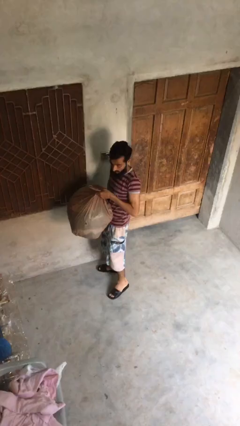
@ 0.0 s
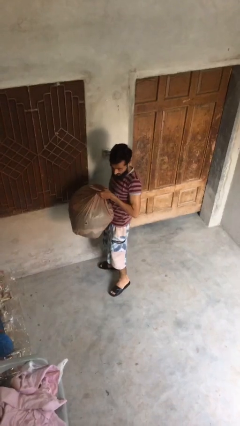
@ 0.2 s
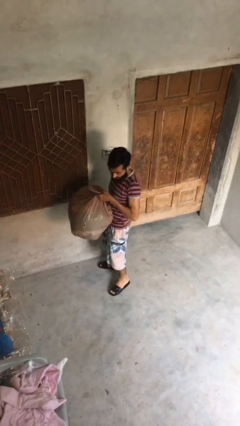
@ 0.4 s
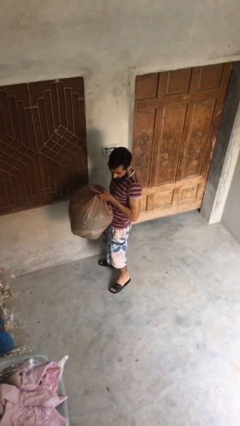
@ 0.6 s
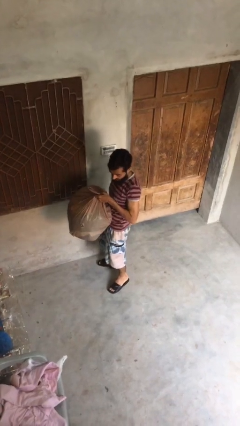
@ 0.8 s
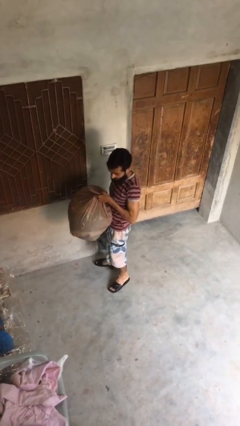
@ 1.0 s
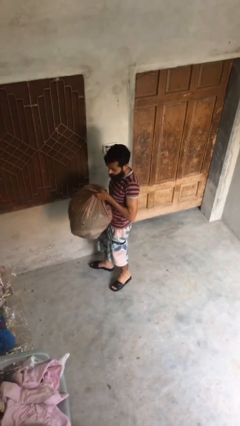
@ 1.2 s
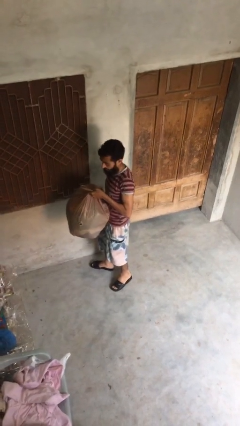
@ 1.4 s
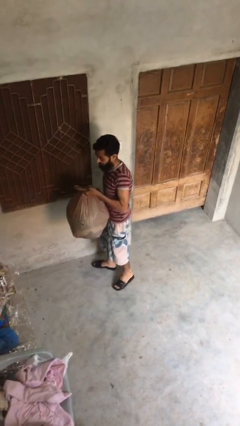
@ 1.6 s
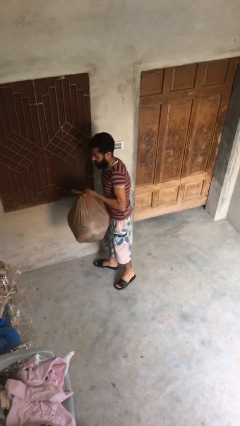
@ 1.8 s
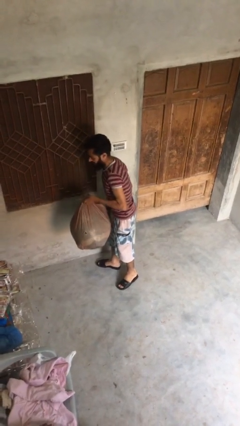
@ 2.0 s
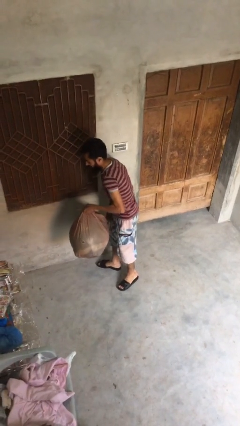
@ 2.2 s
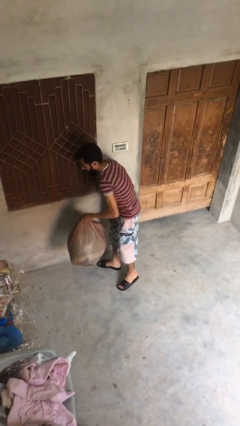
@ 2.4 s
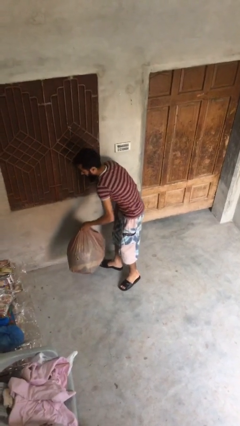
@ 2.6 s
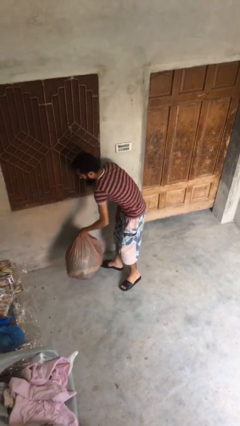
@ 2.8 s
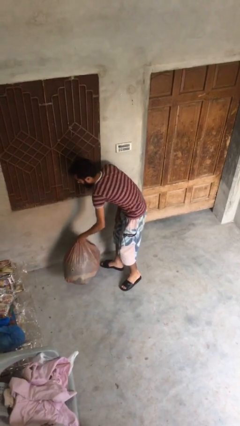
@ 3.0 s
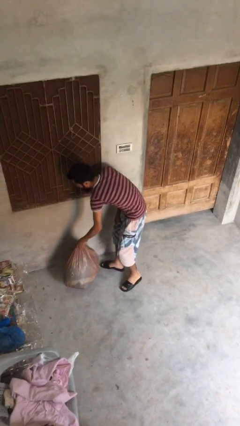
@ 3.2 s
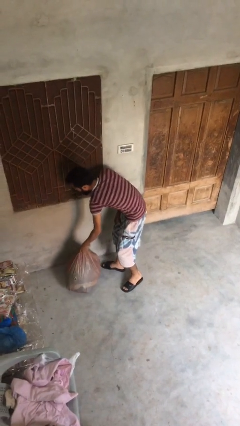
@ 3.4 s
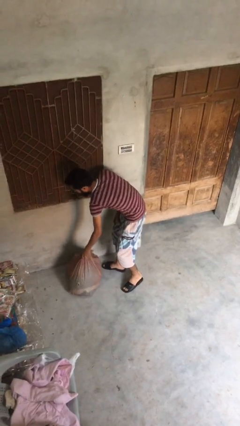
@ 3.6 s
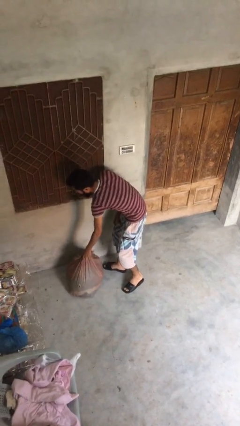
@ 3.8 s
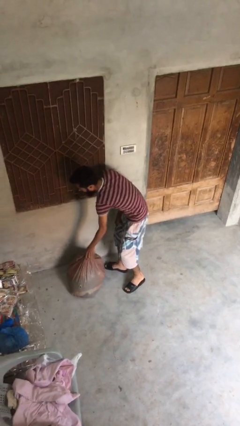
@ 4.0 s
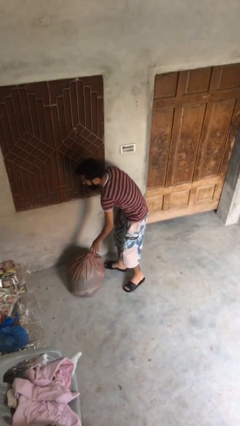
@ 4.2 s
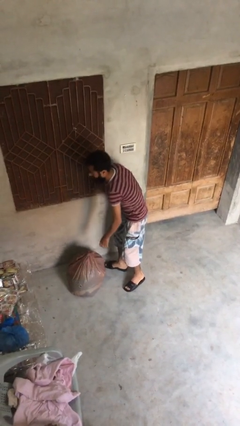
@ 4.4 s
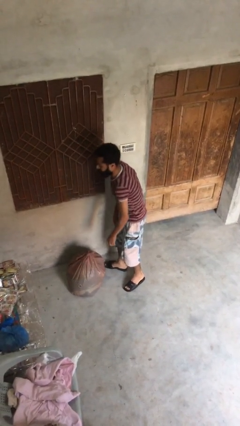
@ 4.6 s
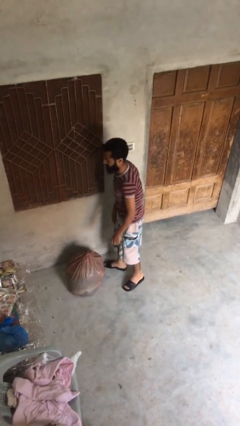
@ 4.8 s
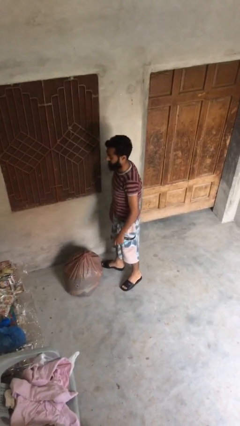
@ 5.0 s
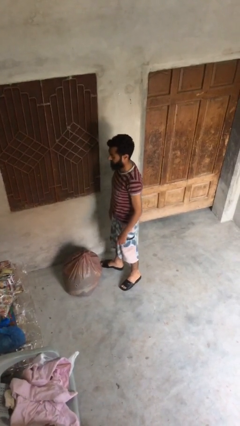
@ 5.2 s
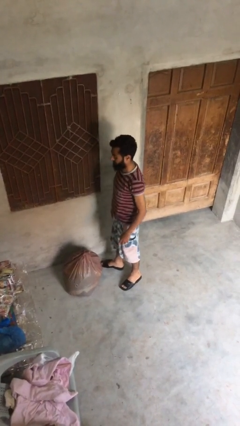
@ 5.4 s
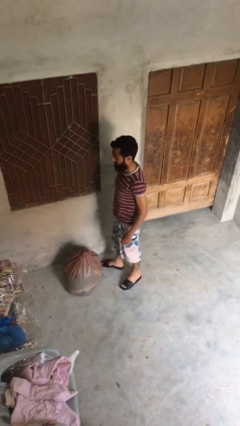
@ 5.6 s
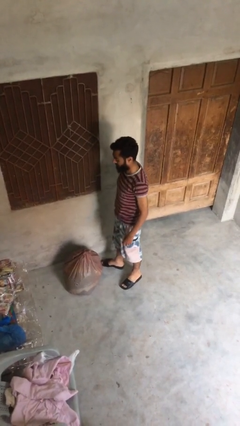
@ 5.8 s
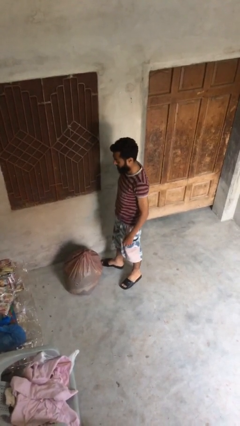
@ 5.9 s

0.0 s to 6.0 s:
person puts down object on floor

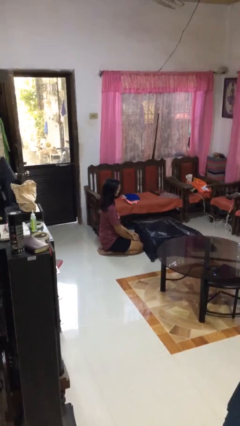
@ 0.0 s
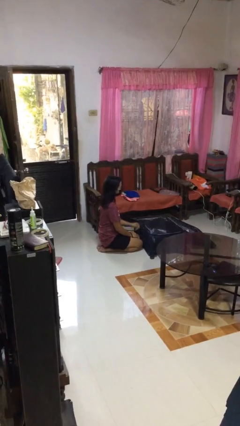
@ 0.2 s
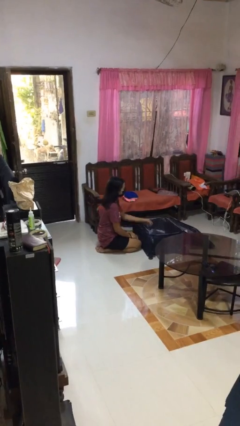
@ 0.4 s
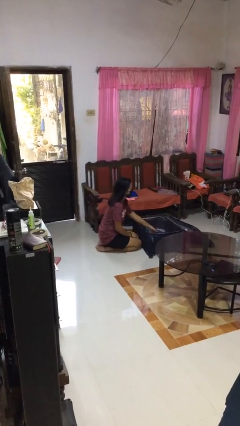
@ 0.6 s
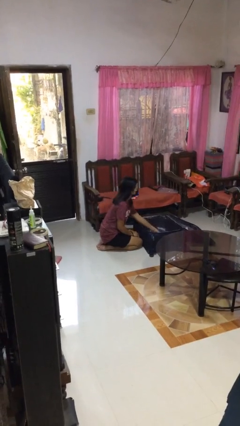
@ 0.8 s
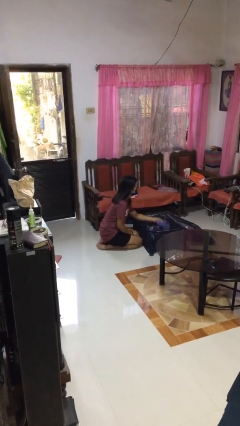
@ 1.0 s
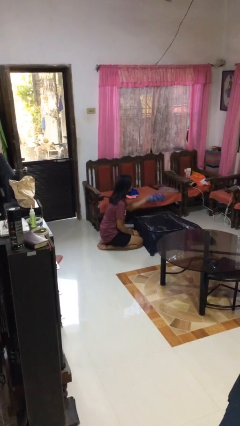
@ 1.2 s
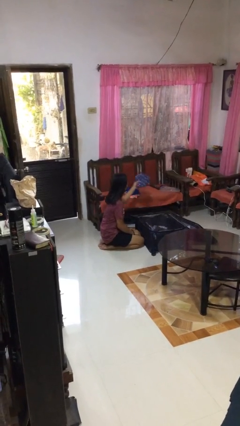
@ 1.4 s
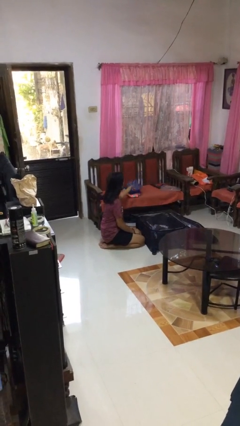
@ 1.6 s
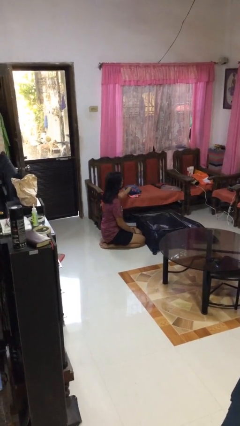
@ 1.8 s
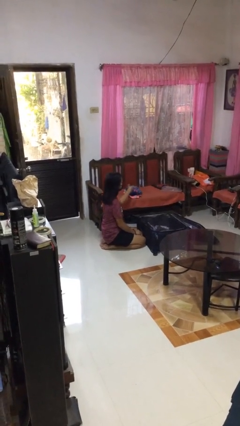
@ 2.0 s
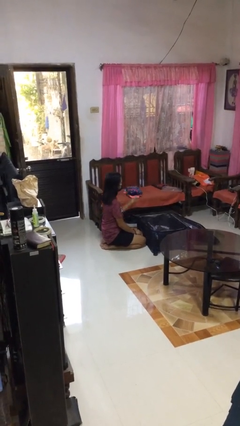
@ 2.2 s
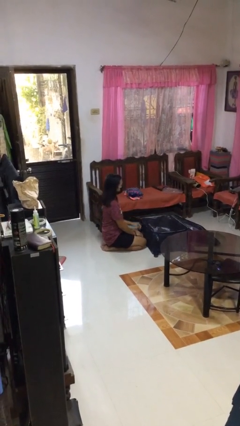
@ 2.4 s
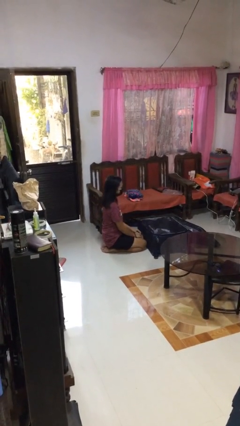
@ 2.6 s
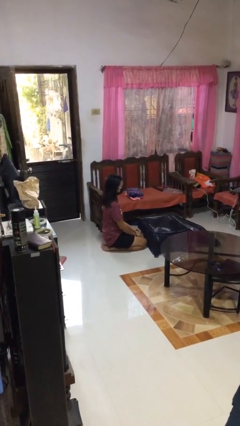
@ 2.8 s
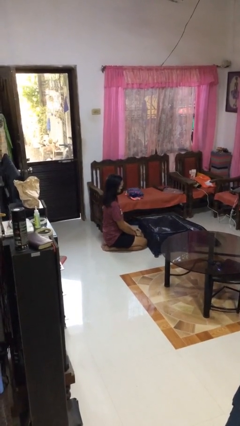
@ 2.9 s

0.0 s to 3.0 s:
person unloads clothes from suitcase

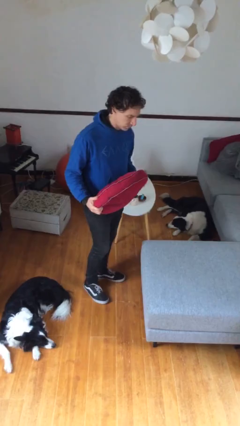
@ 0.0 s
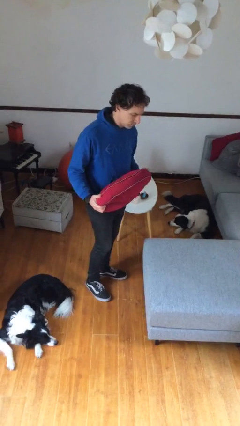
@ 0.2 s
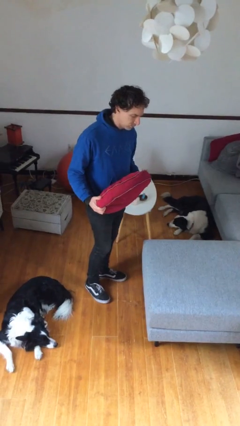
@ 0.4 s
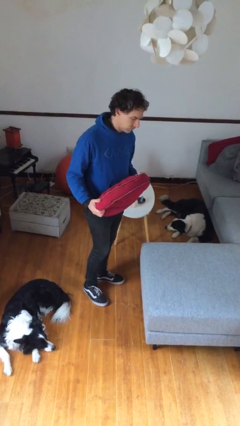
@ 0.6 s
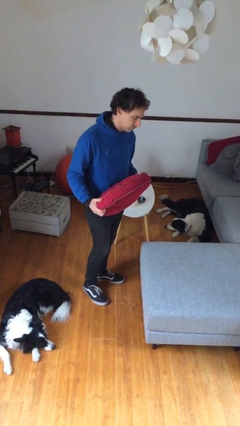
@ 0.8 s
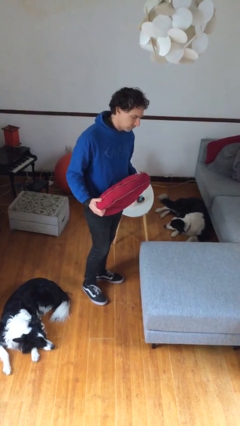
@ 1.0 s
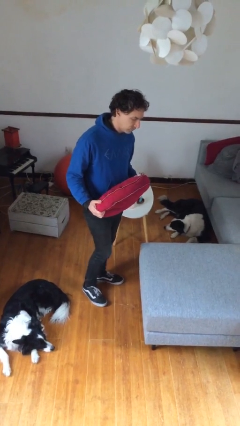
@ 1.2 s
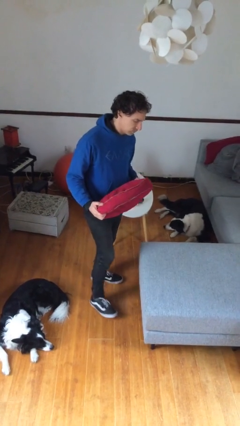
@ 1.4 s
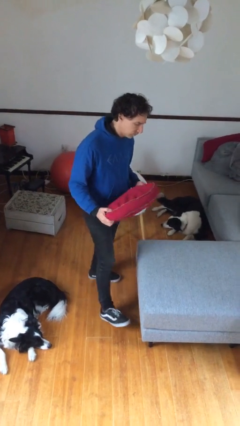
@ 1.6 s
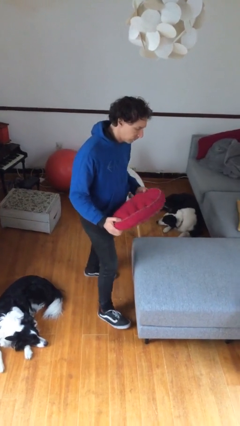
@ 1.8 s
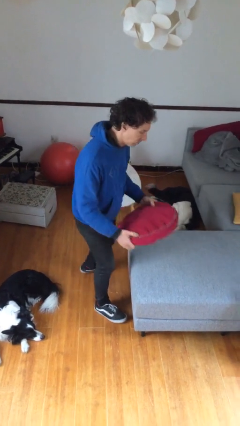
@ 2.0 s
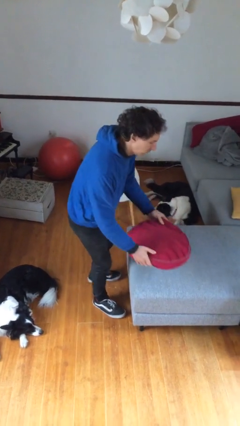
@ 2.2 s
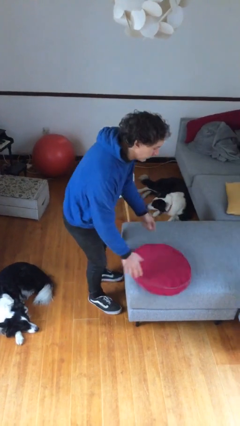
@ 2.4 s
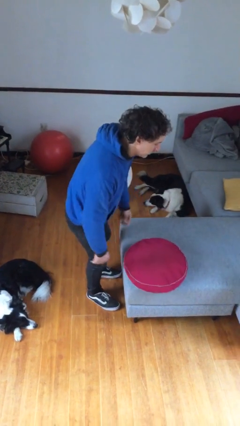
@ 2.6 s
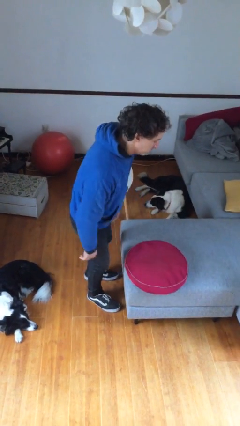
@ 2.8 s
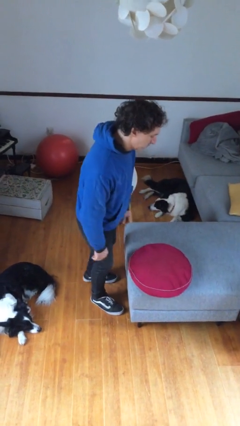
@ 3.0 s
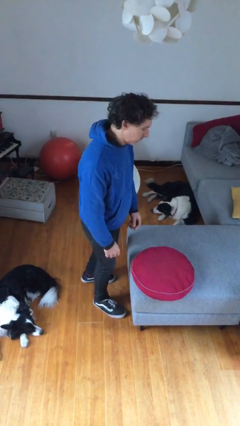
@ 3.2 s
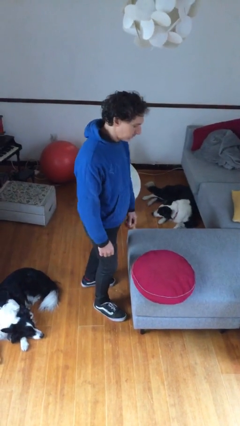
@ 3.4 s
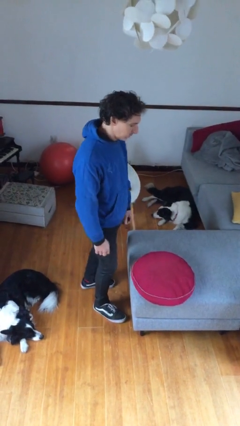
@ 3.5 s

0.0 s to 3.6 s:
person puts down object on couch

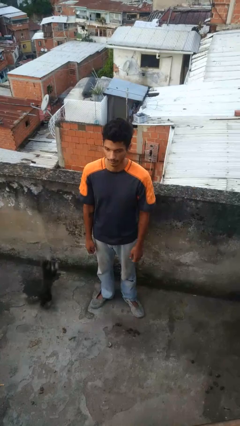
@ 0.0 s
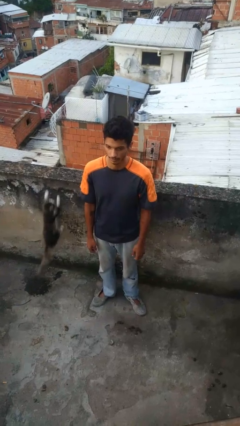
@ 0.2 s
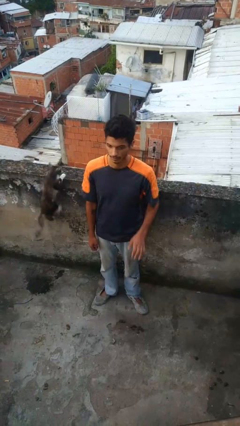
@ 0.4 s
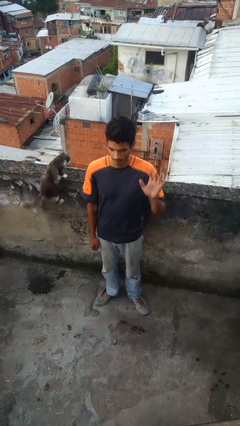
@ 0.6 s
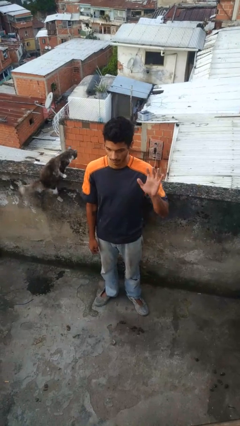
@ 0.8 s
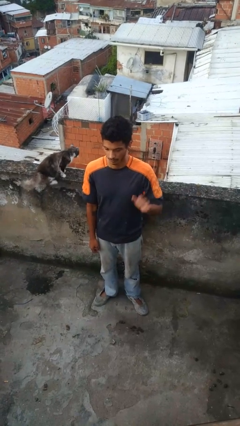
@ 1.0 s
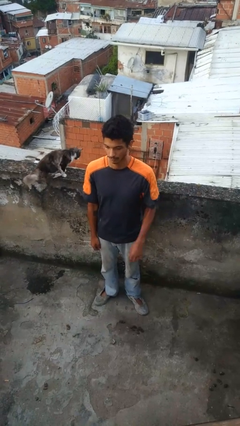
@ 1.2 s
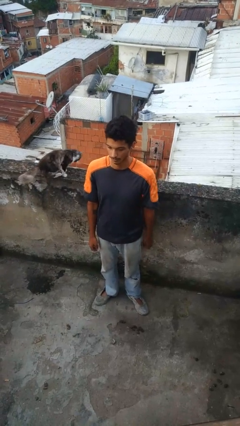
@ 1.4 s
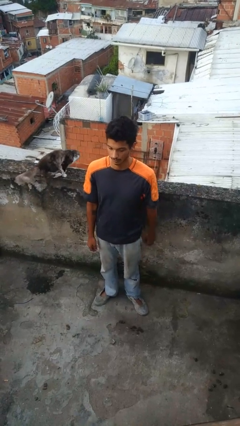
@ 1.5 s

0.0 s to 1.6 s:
person gestures number five

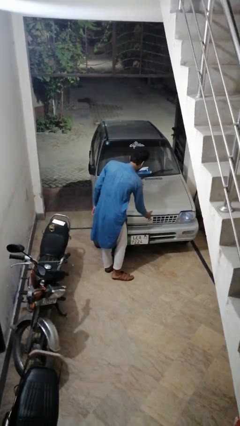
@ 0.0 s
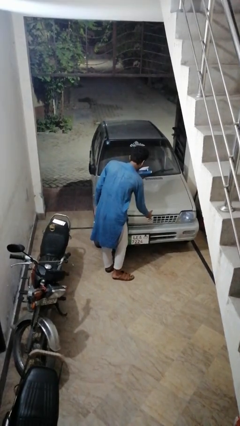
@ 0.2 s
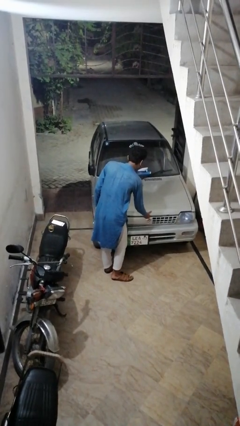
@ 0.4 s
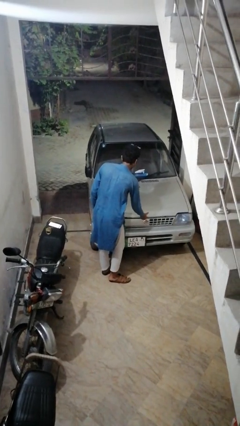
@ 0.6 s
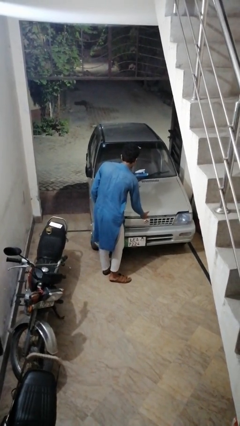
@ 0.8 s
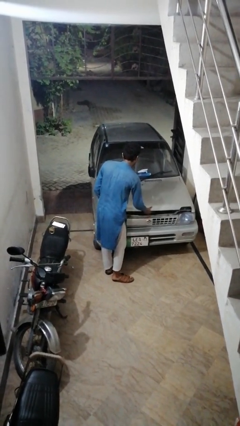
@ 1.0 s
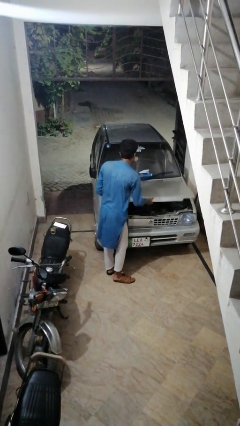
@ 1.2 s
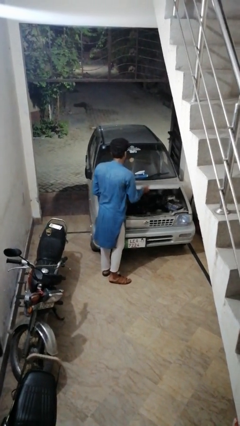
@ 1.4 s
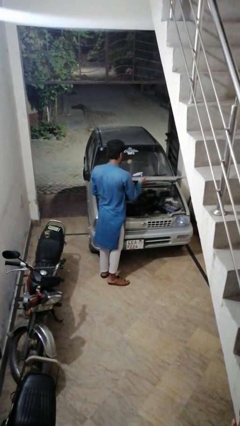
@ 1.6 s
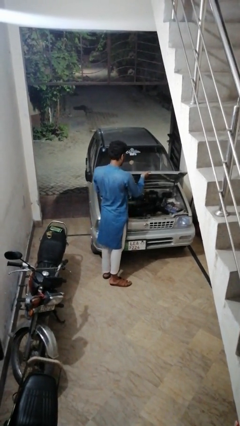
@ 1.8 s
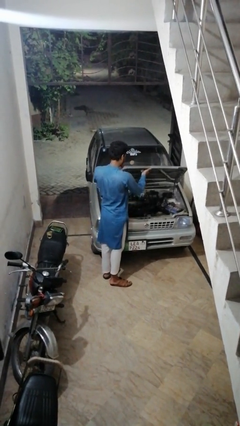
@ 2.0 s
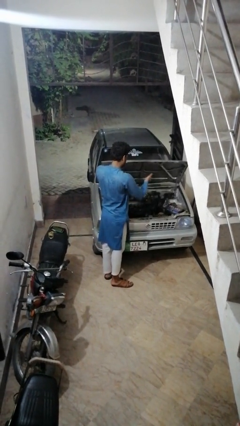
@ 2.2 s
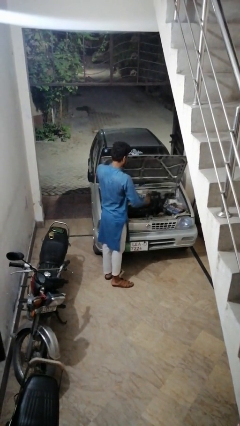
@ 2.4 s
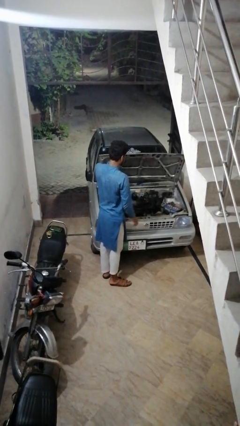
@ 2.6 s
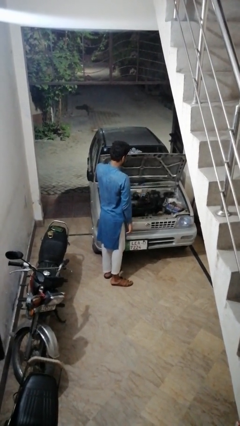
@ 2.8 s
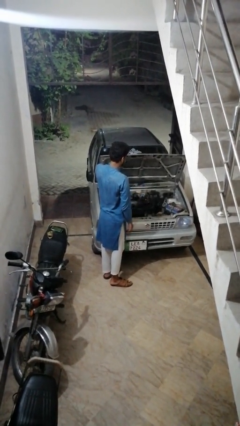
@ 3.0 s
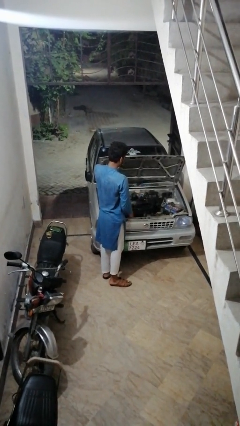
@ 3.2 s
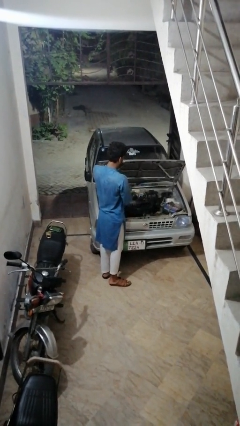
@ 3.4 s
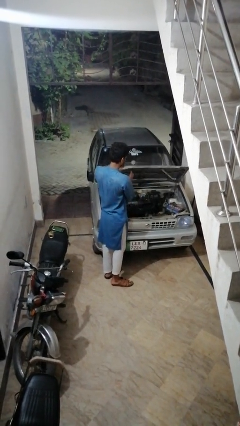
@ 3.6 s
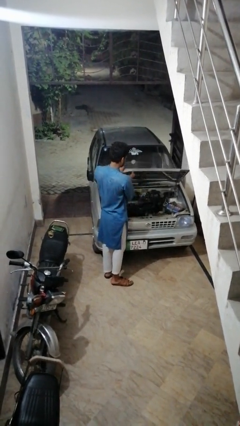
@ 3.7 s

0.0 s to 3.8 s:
person opens car hood
